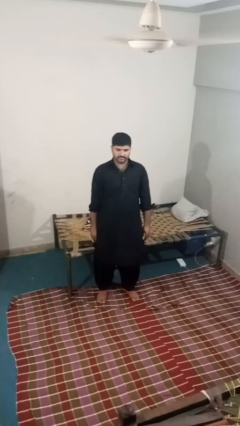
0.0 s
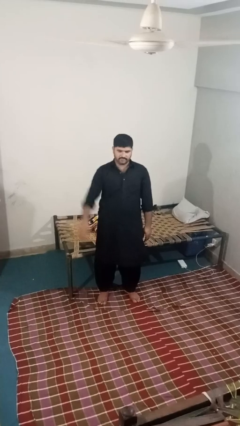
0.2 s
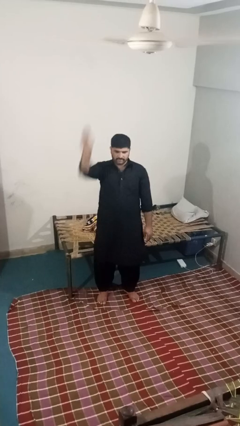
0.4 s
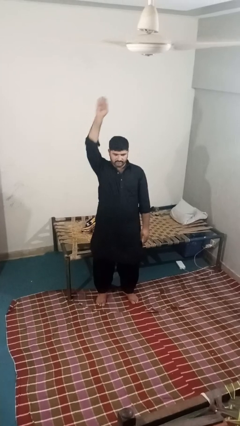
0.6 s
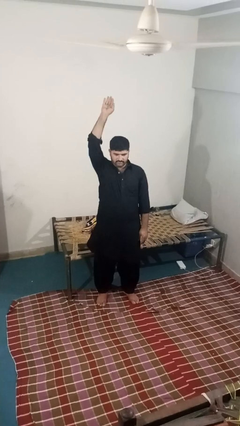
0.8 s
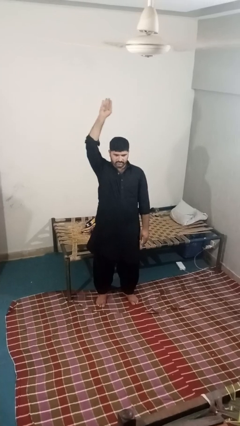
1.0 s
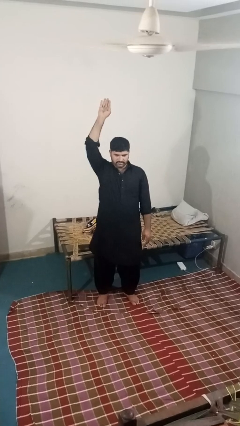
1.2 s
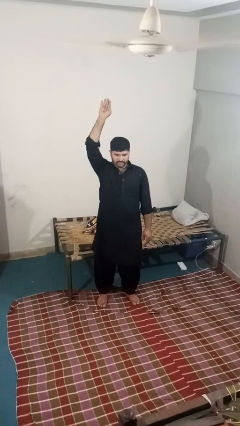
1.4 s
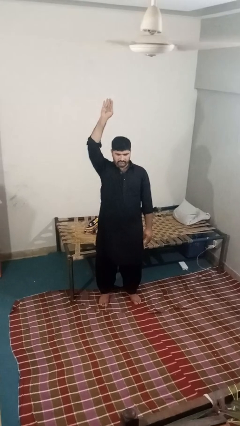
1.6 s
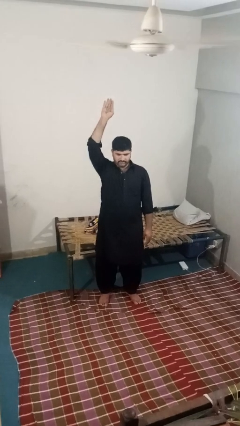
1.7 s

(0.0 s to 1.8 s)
person gestures raise hand

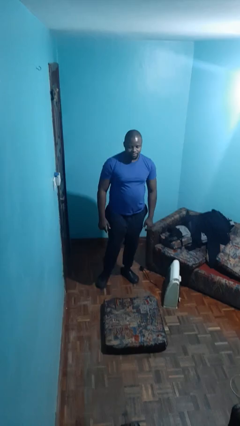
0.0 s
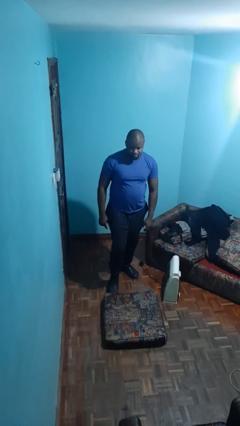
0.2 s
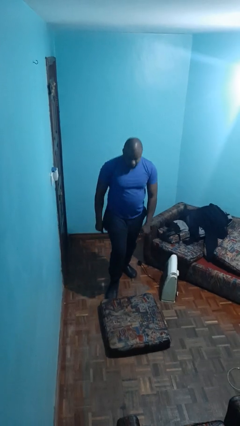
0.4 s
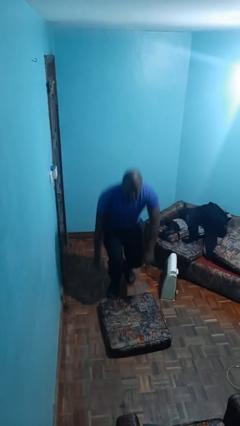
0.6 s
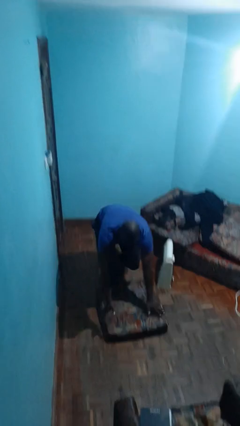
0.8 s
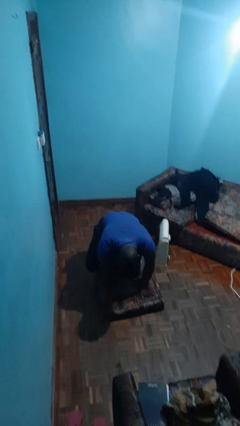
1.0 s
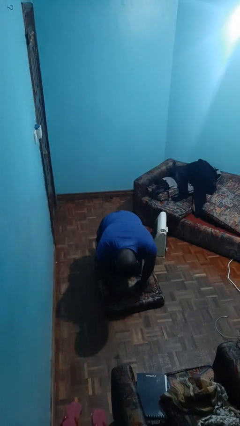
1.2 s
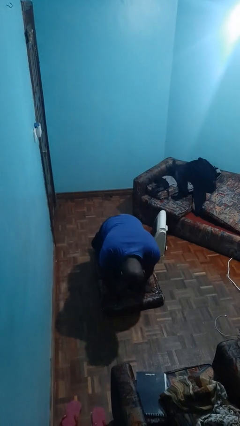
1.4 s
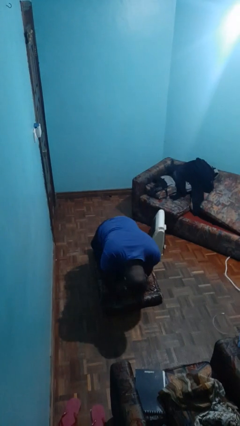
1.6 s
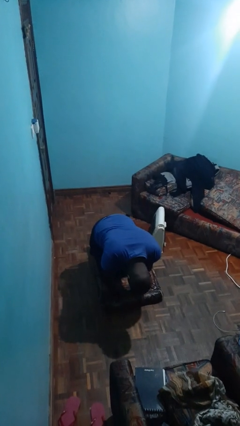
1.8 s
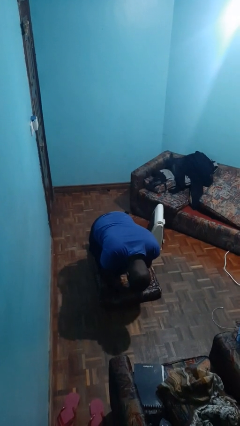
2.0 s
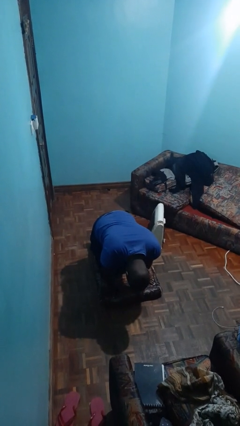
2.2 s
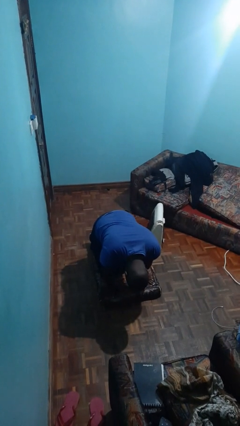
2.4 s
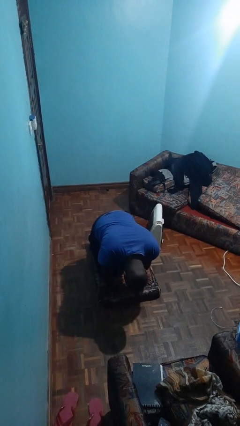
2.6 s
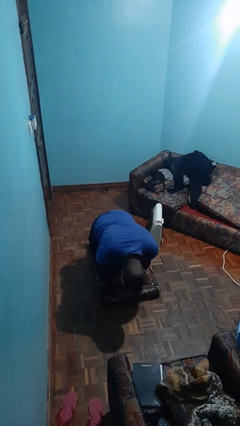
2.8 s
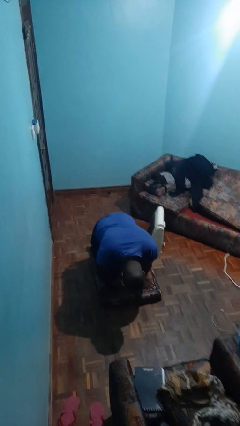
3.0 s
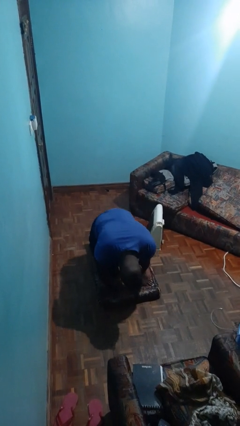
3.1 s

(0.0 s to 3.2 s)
person trips on object on floor

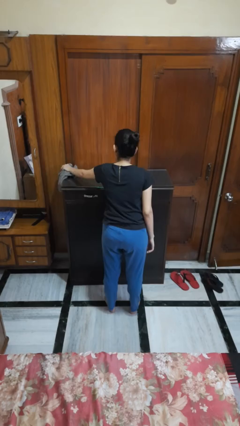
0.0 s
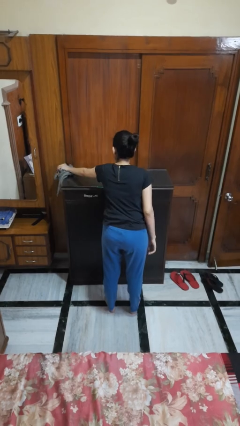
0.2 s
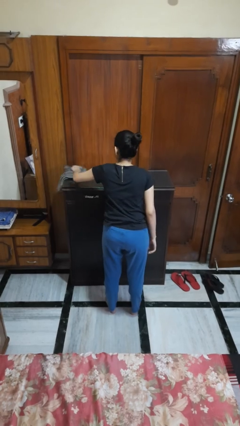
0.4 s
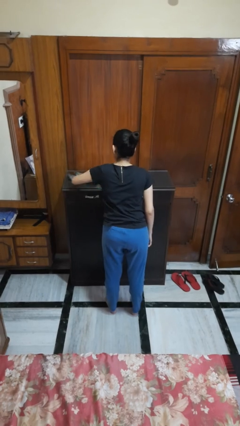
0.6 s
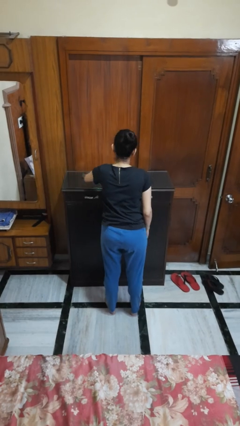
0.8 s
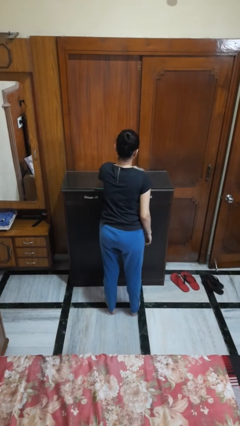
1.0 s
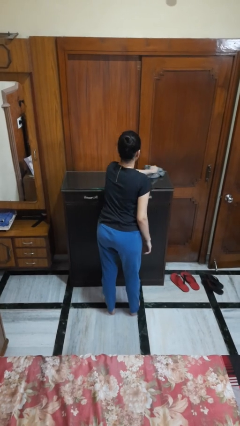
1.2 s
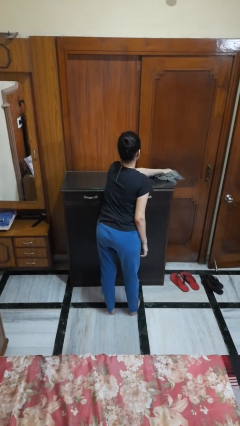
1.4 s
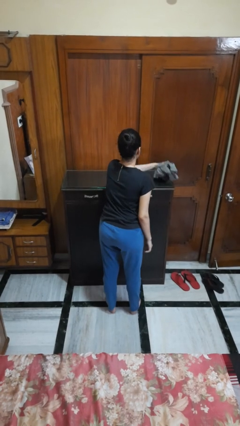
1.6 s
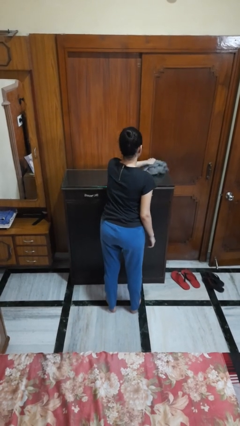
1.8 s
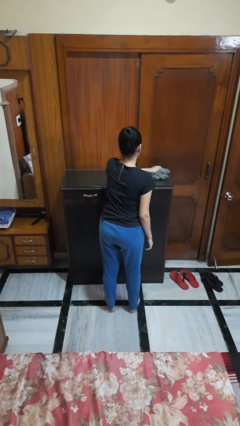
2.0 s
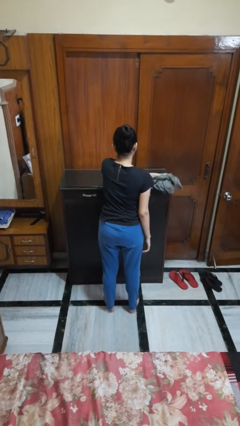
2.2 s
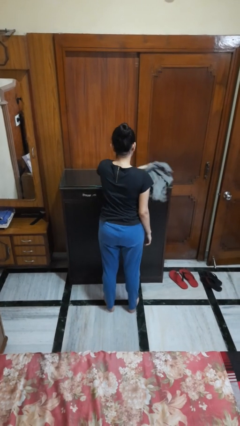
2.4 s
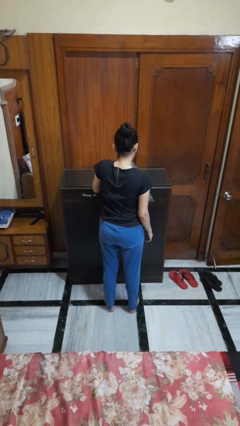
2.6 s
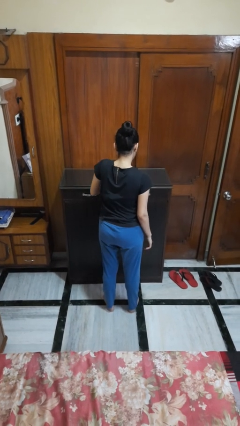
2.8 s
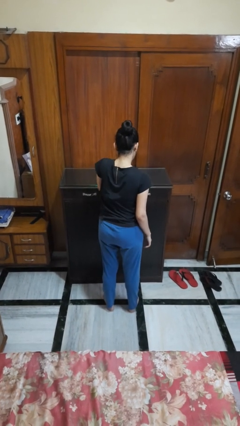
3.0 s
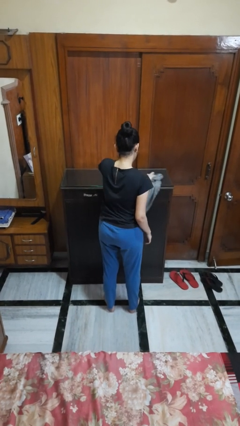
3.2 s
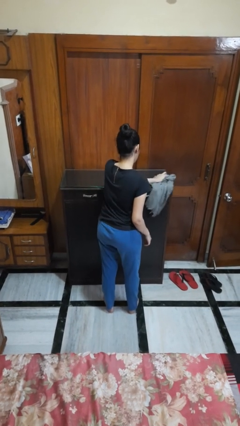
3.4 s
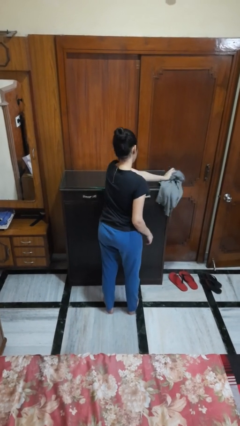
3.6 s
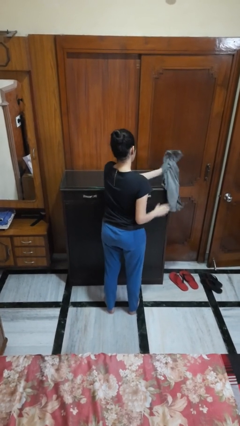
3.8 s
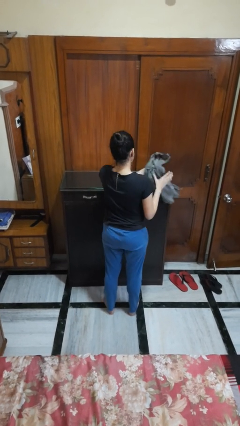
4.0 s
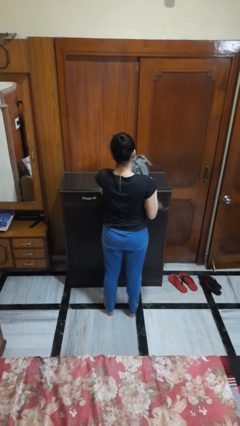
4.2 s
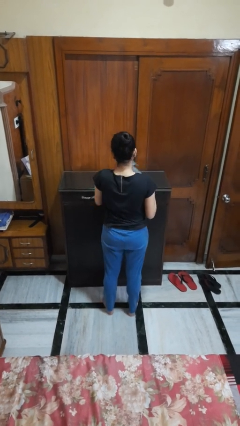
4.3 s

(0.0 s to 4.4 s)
person cleans table with rag

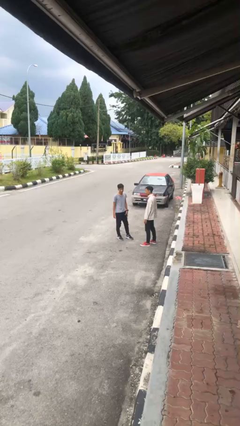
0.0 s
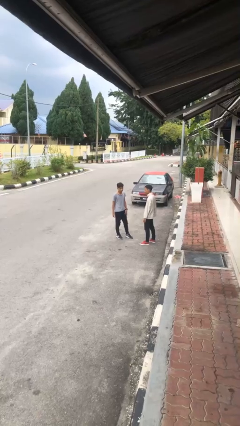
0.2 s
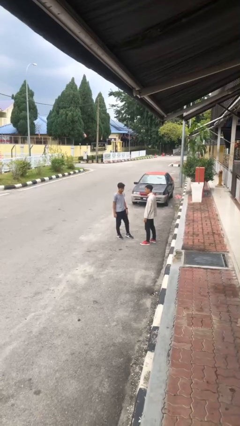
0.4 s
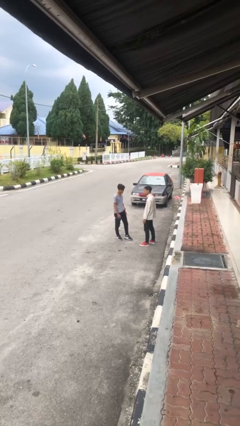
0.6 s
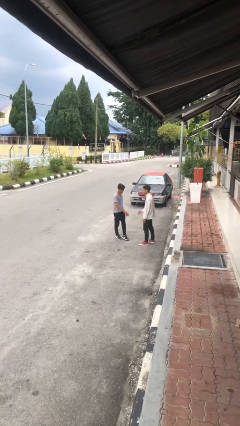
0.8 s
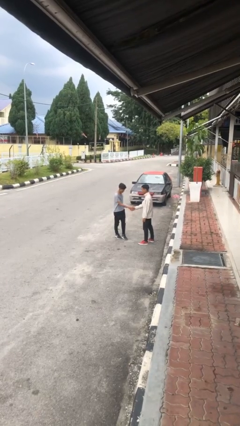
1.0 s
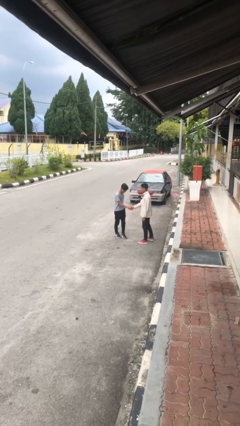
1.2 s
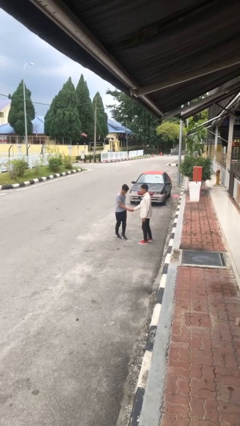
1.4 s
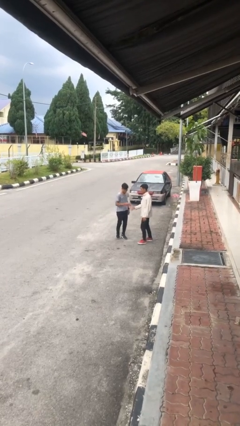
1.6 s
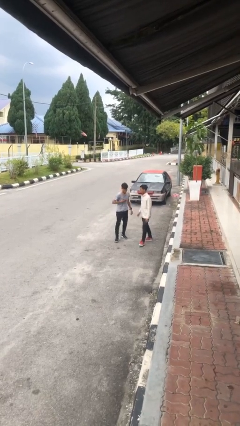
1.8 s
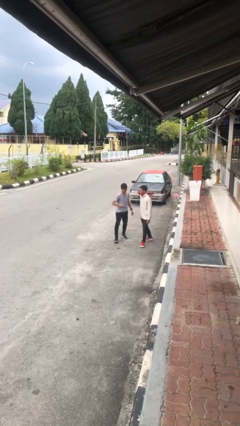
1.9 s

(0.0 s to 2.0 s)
person shakes hand

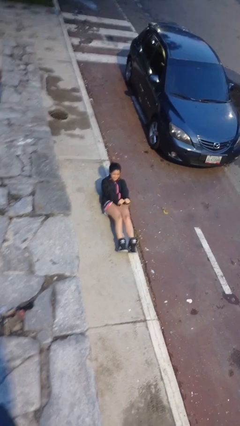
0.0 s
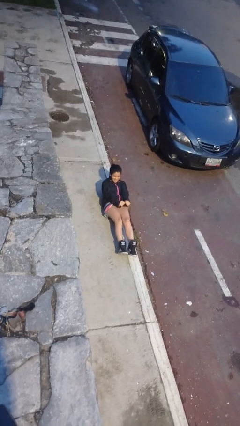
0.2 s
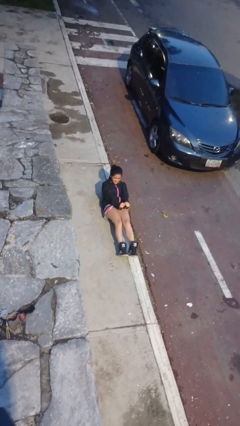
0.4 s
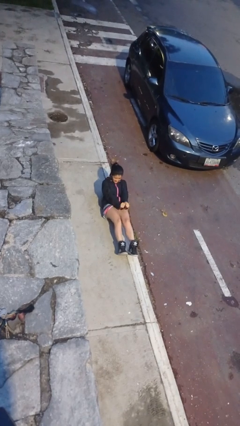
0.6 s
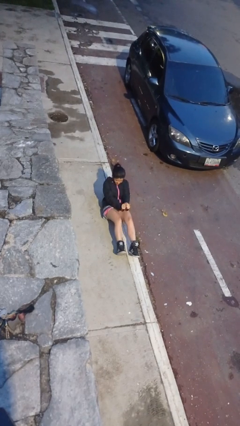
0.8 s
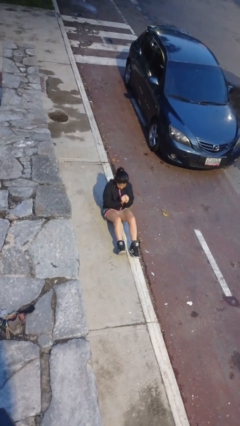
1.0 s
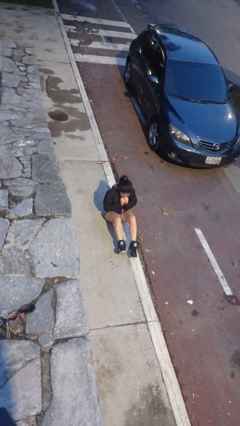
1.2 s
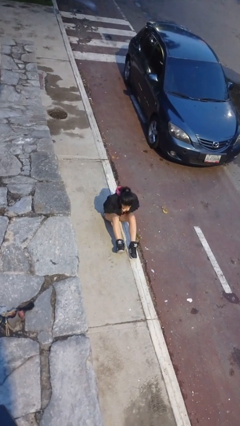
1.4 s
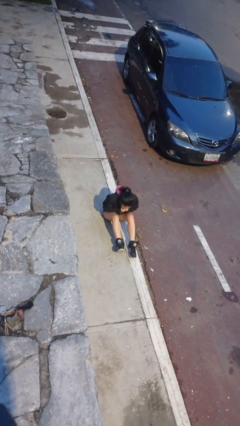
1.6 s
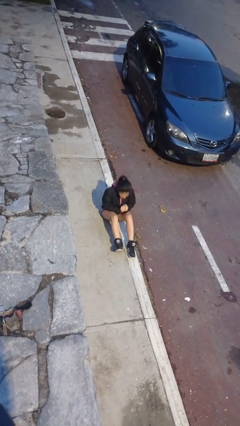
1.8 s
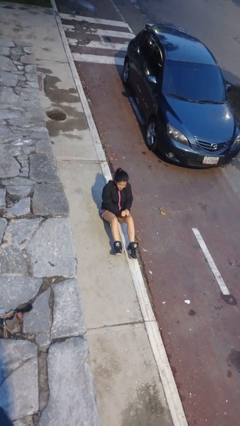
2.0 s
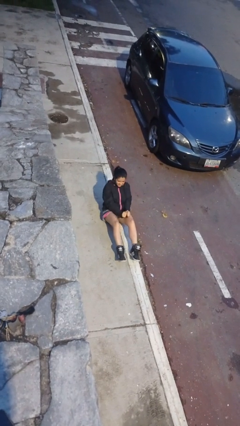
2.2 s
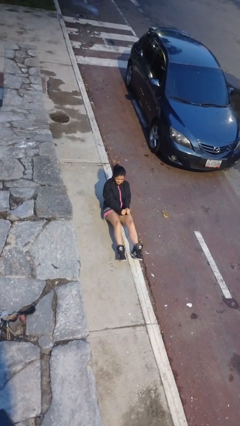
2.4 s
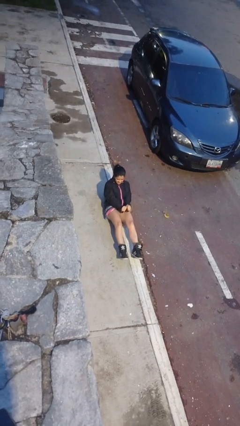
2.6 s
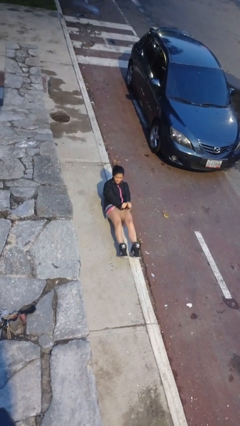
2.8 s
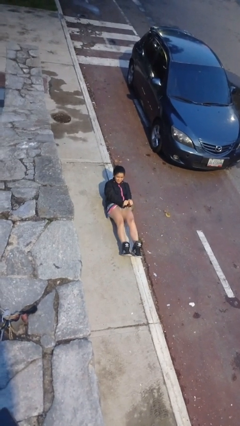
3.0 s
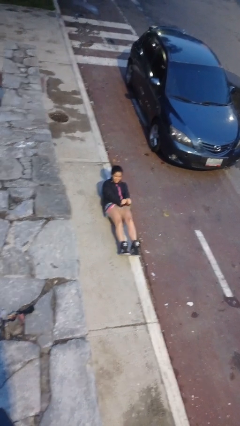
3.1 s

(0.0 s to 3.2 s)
person exercises with situp

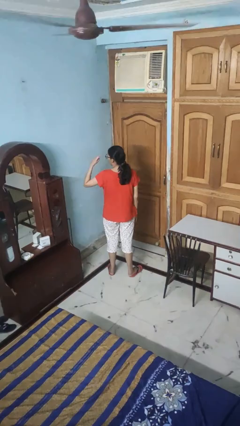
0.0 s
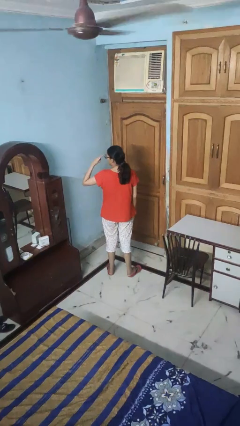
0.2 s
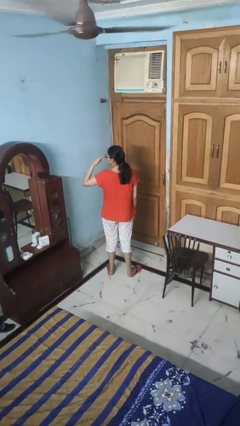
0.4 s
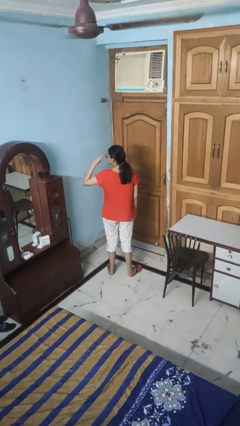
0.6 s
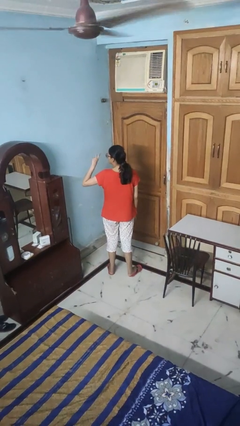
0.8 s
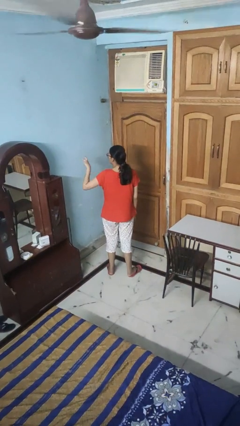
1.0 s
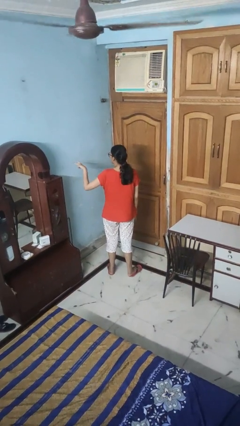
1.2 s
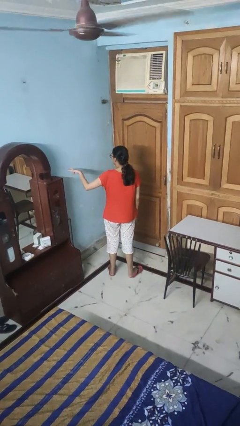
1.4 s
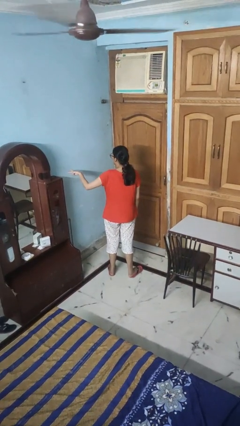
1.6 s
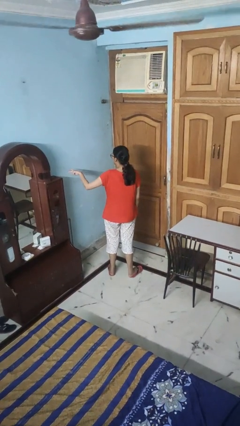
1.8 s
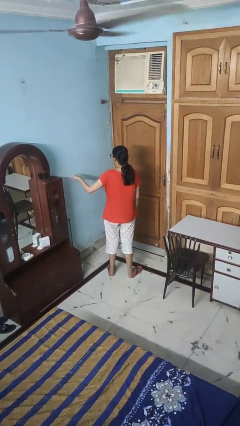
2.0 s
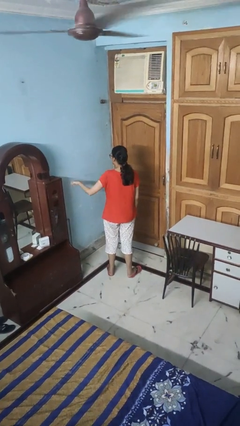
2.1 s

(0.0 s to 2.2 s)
person gestures watch closely
